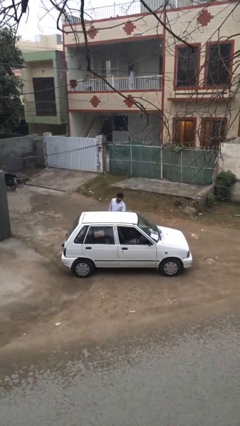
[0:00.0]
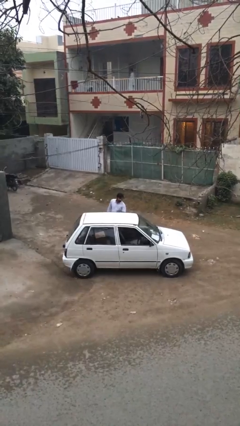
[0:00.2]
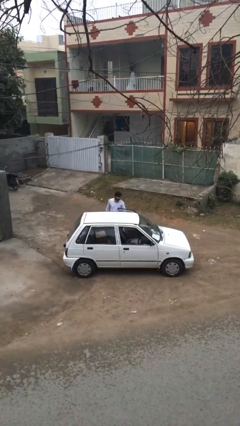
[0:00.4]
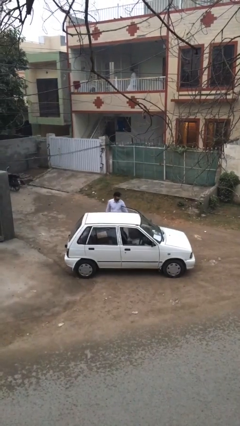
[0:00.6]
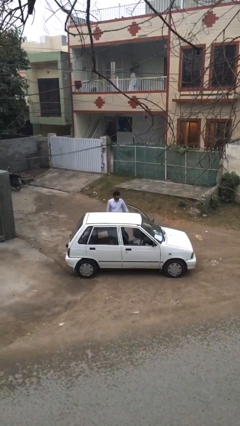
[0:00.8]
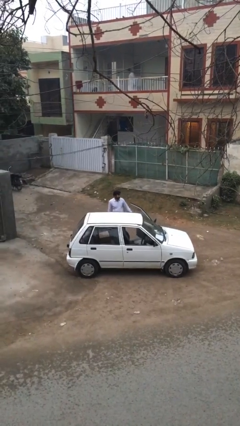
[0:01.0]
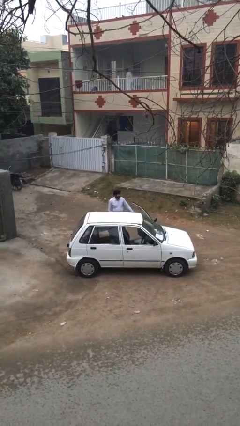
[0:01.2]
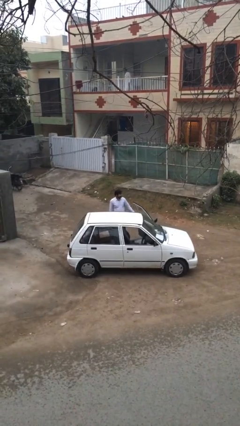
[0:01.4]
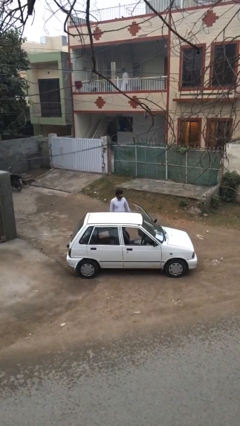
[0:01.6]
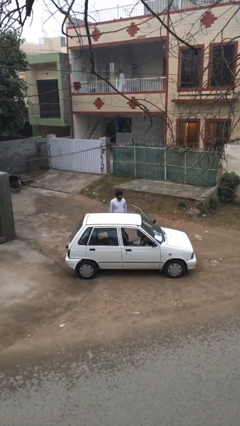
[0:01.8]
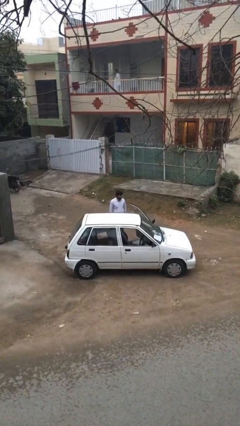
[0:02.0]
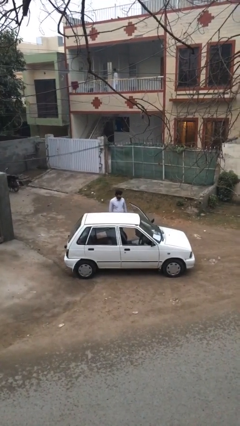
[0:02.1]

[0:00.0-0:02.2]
person opens car door

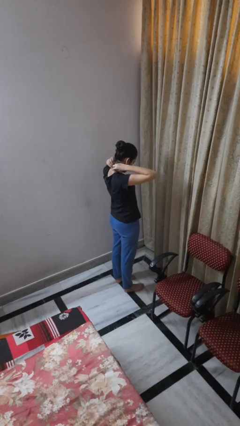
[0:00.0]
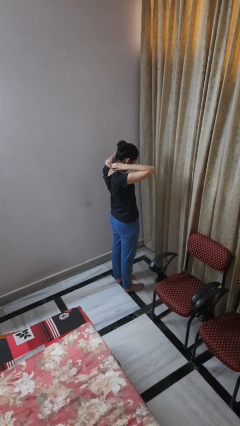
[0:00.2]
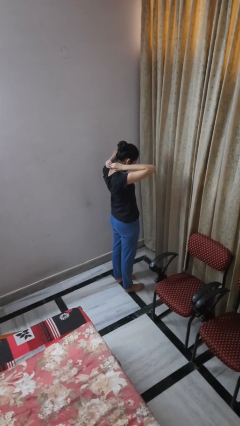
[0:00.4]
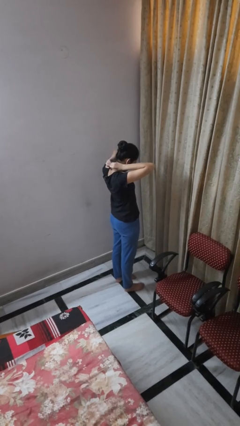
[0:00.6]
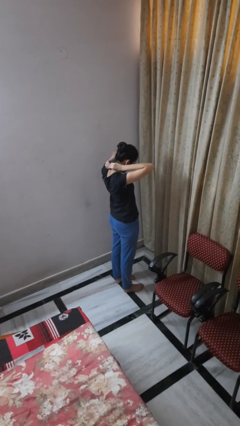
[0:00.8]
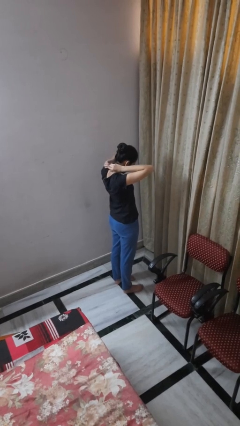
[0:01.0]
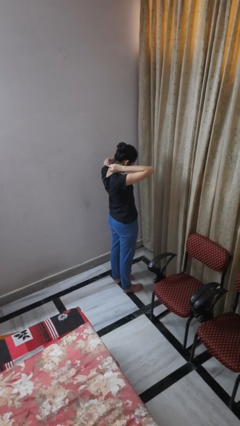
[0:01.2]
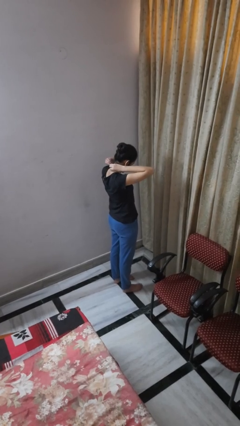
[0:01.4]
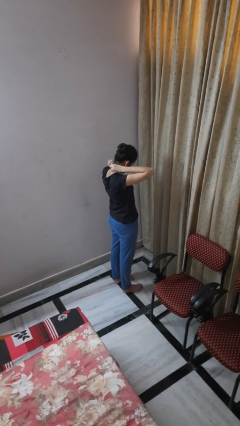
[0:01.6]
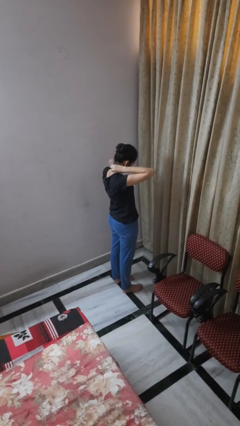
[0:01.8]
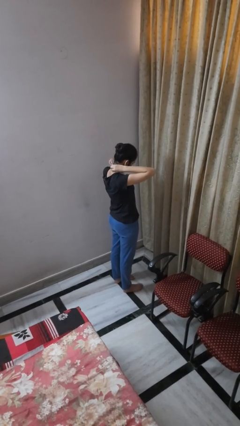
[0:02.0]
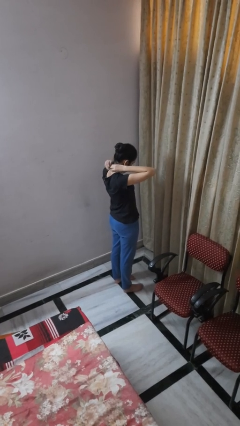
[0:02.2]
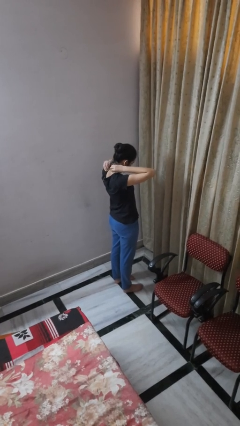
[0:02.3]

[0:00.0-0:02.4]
person puts on necklace

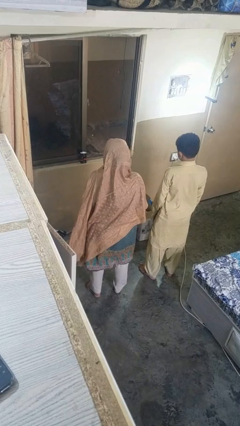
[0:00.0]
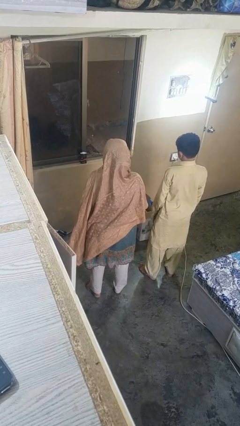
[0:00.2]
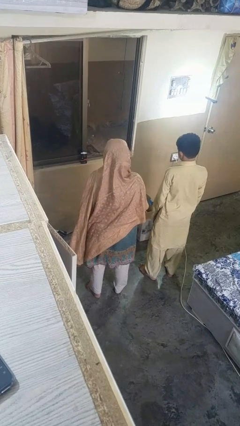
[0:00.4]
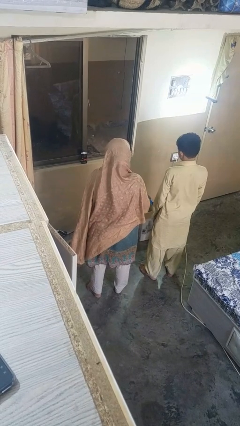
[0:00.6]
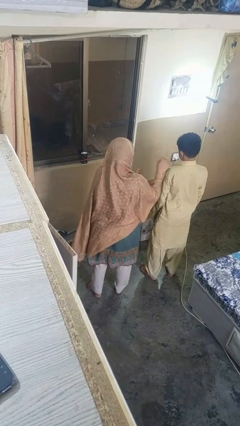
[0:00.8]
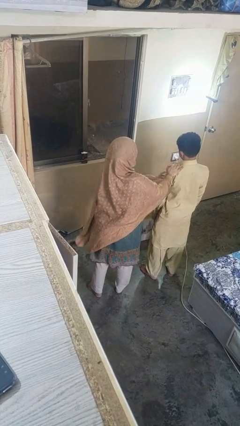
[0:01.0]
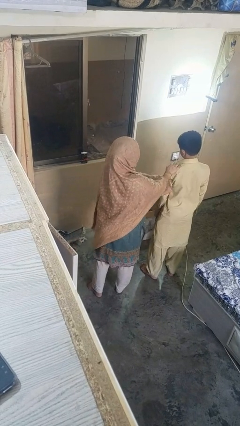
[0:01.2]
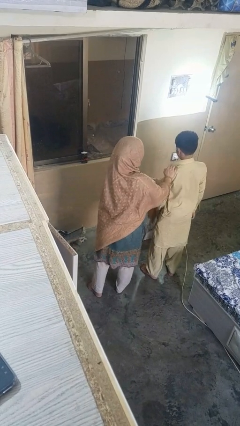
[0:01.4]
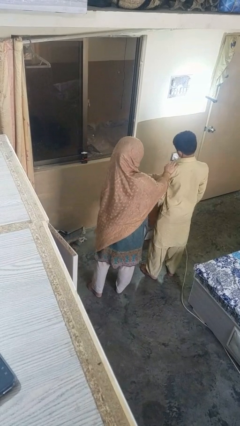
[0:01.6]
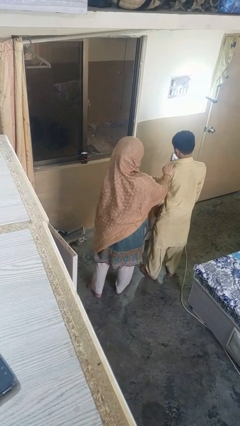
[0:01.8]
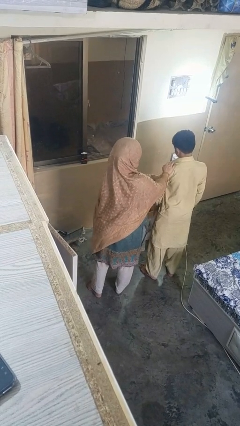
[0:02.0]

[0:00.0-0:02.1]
person shoves person

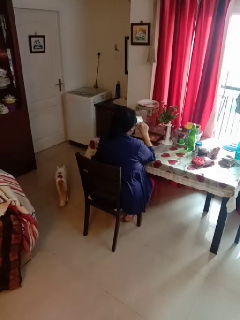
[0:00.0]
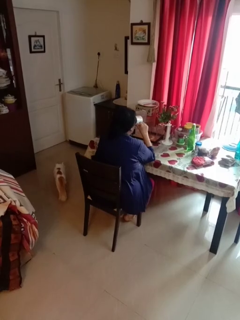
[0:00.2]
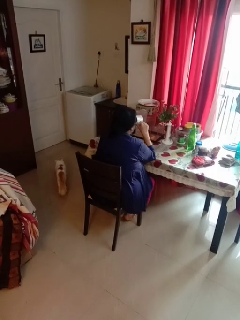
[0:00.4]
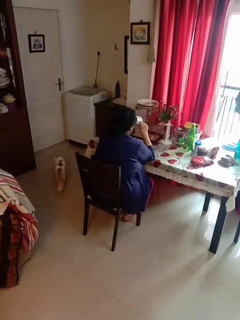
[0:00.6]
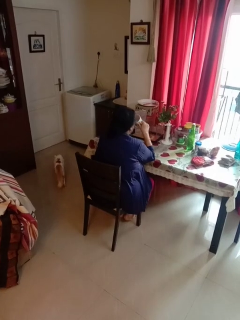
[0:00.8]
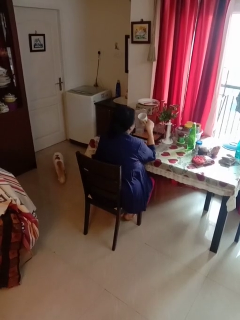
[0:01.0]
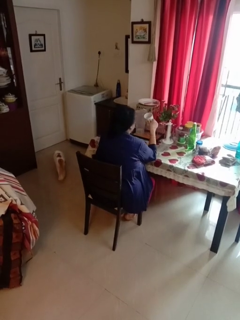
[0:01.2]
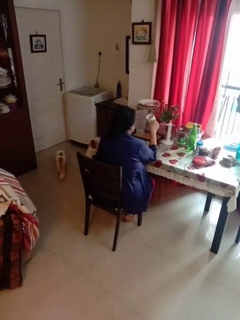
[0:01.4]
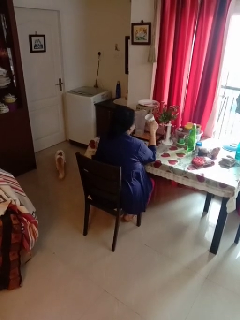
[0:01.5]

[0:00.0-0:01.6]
person drinks from mug

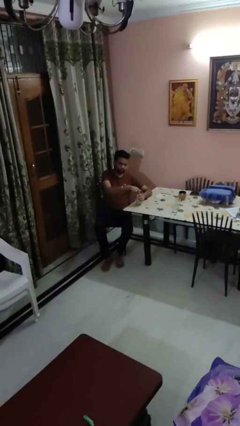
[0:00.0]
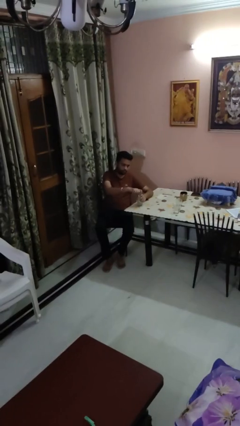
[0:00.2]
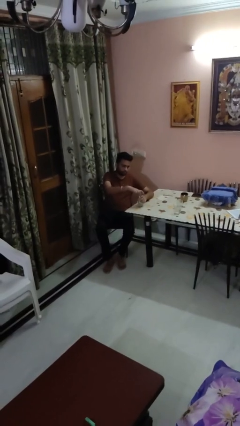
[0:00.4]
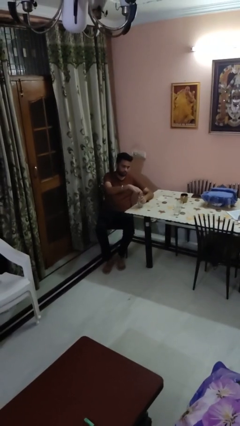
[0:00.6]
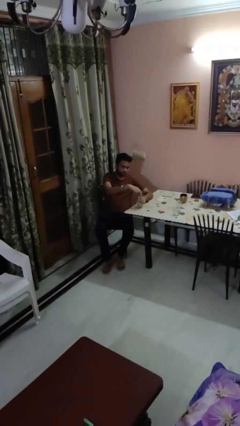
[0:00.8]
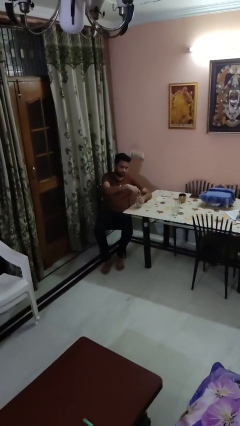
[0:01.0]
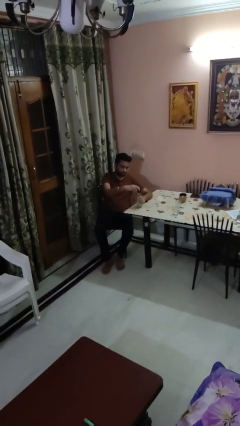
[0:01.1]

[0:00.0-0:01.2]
person unscrews lid from bottle

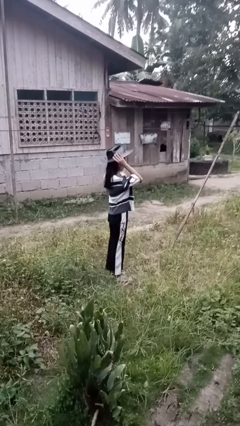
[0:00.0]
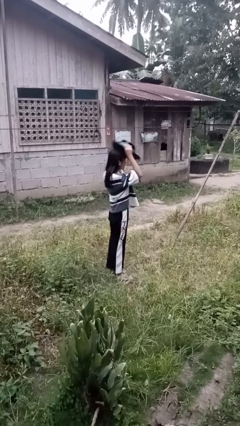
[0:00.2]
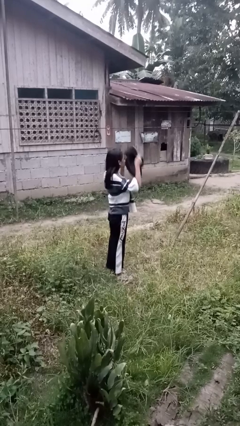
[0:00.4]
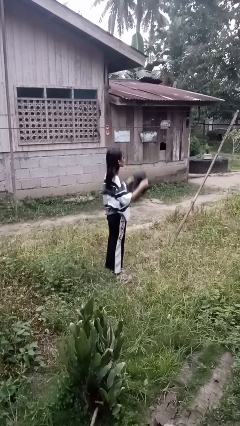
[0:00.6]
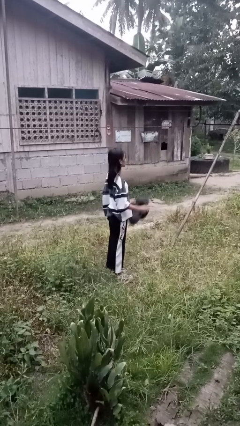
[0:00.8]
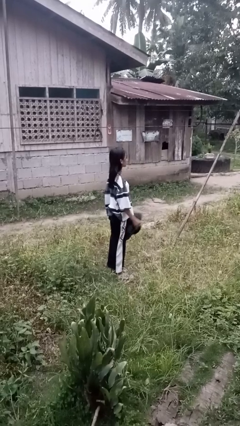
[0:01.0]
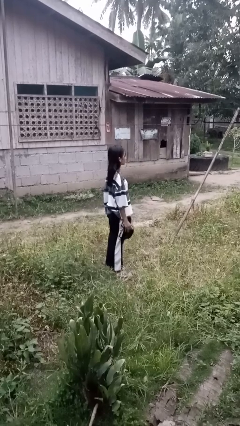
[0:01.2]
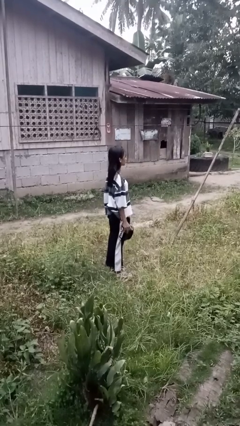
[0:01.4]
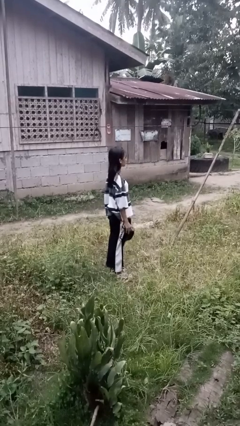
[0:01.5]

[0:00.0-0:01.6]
person takes off hat

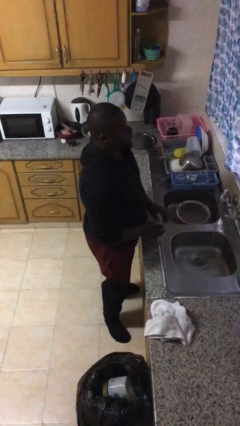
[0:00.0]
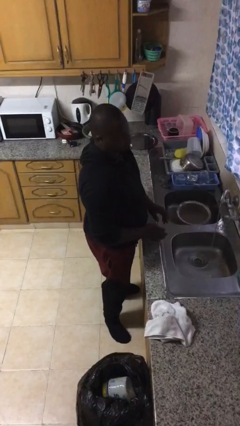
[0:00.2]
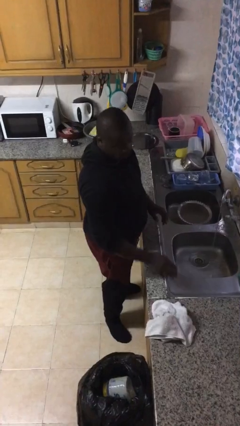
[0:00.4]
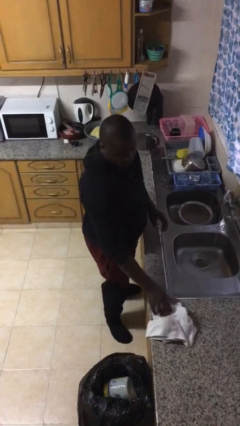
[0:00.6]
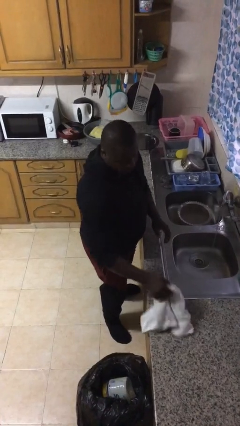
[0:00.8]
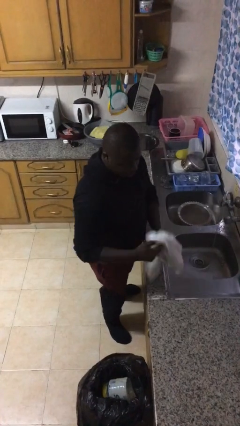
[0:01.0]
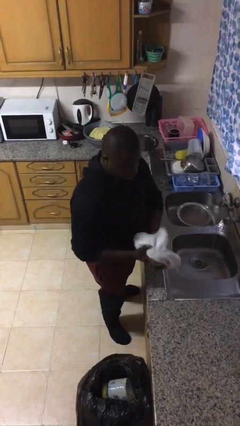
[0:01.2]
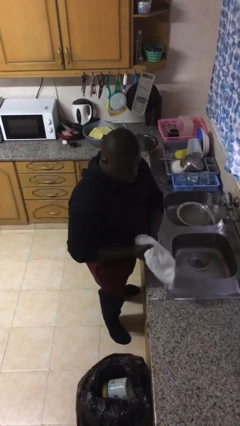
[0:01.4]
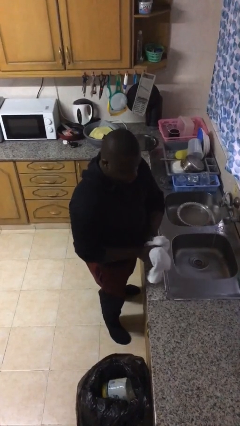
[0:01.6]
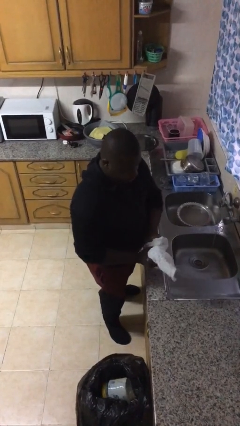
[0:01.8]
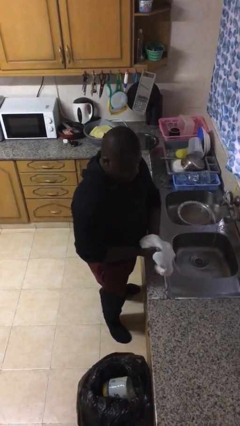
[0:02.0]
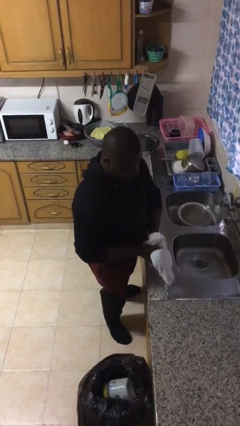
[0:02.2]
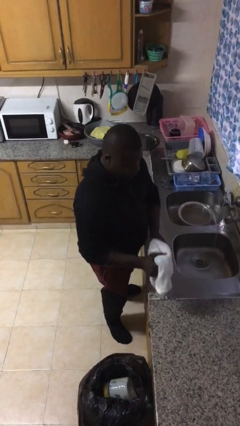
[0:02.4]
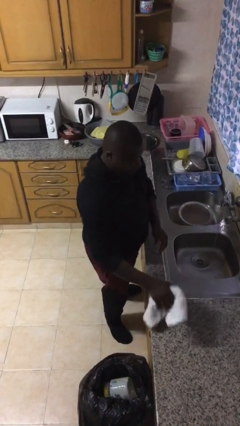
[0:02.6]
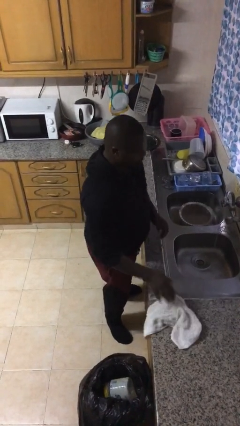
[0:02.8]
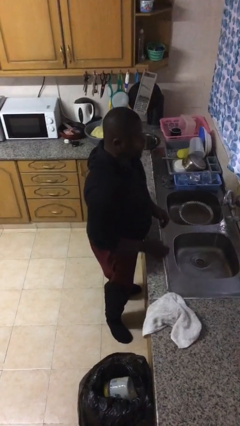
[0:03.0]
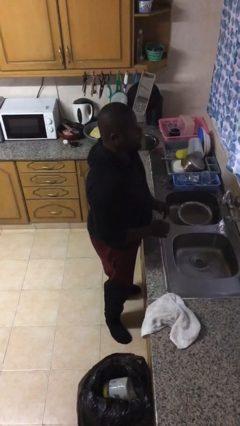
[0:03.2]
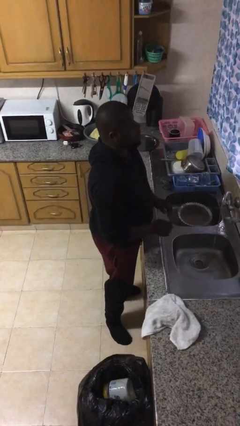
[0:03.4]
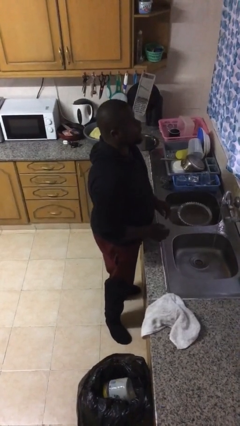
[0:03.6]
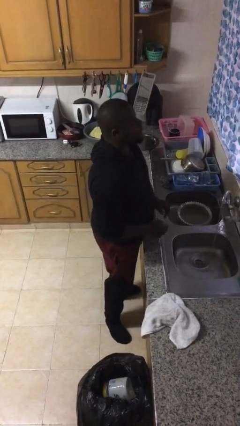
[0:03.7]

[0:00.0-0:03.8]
person dries hands with towel

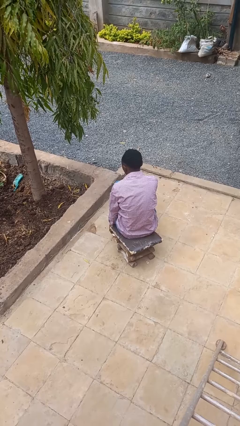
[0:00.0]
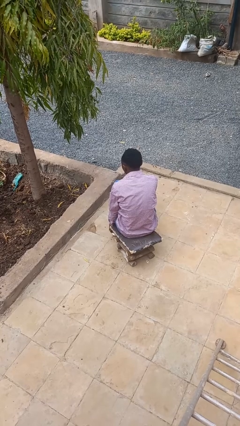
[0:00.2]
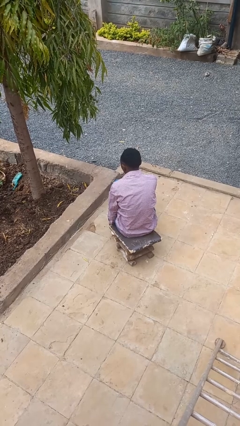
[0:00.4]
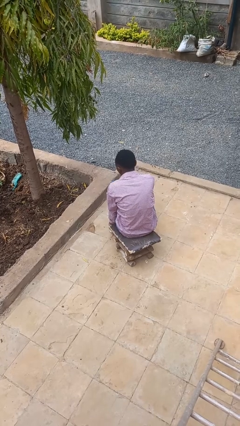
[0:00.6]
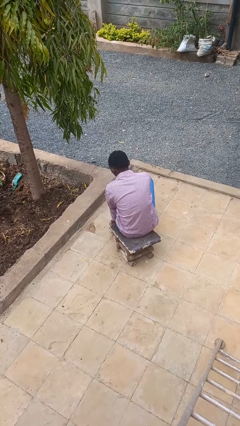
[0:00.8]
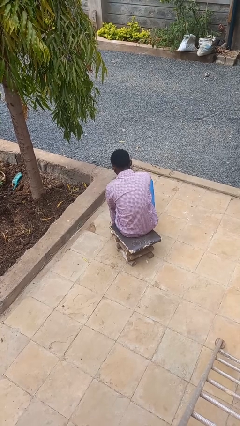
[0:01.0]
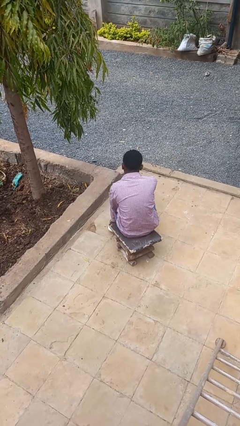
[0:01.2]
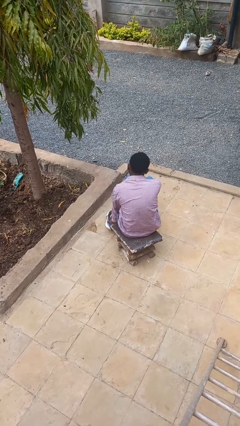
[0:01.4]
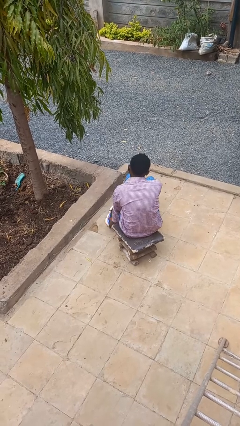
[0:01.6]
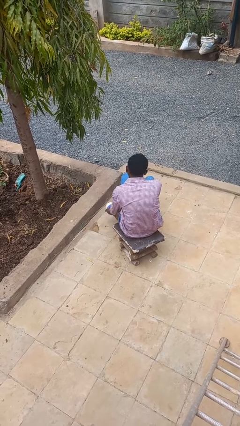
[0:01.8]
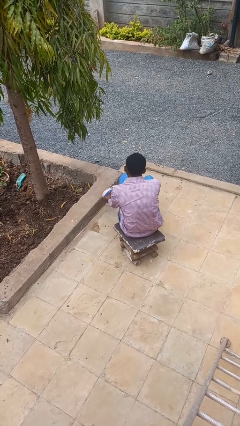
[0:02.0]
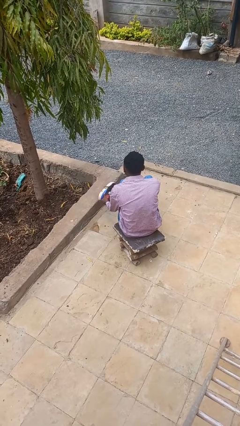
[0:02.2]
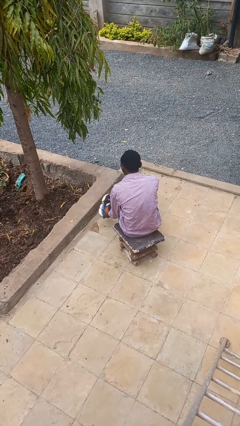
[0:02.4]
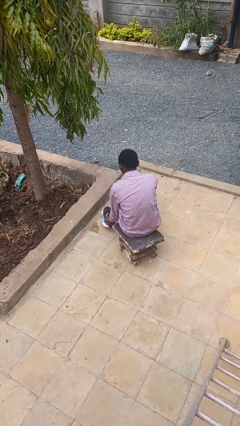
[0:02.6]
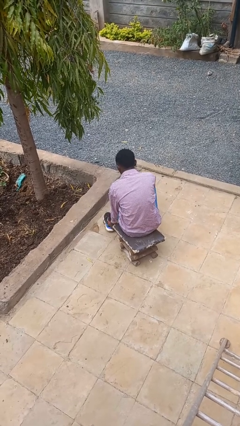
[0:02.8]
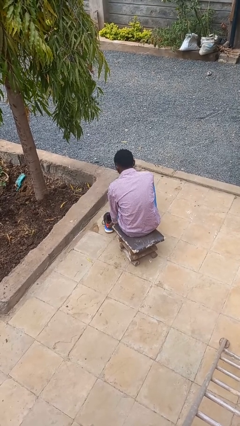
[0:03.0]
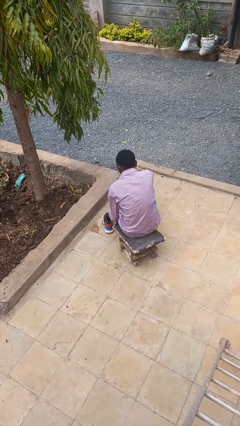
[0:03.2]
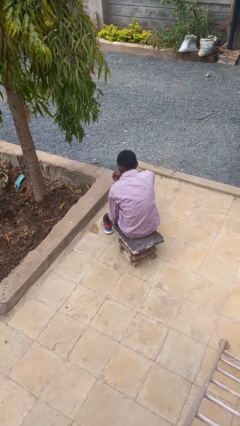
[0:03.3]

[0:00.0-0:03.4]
person takes off shoes
